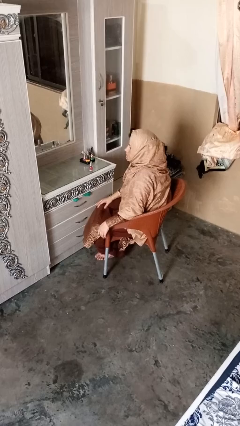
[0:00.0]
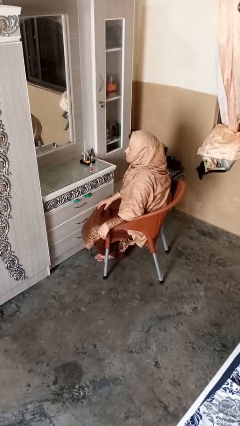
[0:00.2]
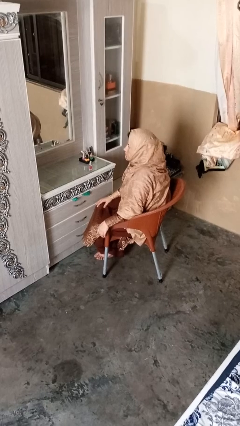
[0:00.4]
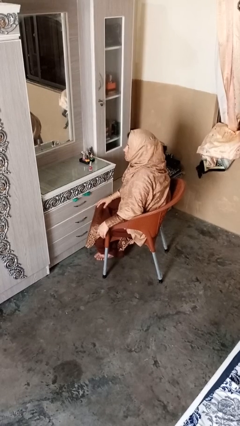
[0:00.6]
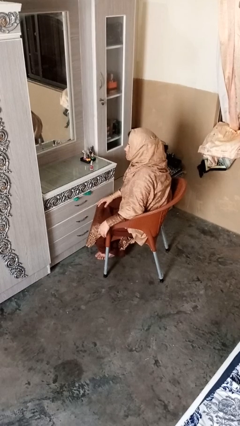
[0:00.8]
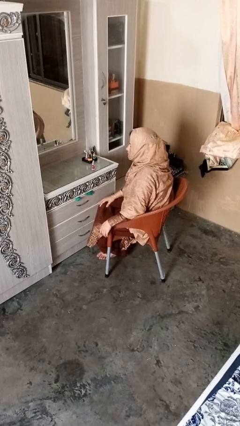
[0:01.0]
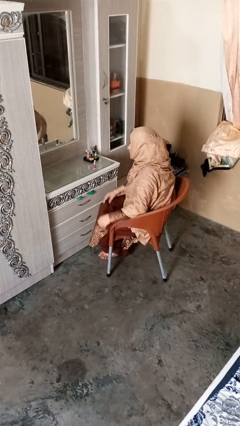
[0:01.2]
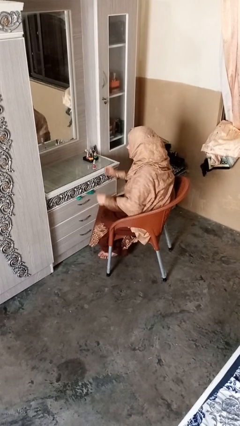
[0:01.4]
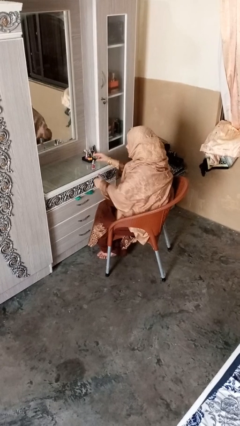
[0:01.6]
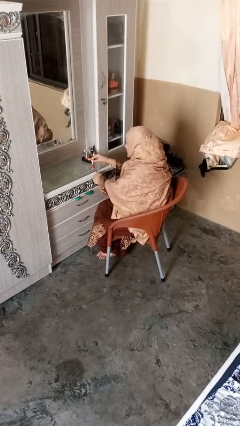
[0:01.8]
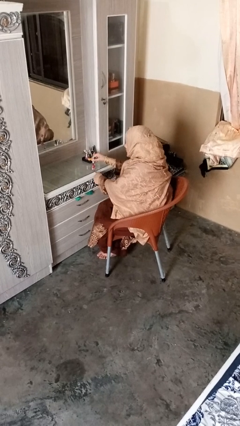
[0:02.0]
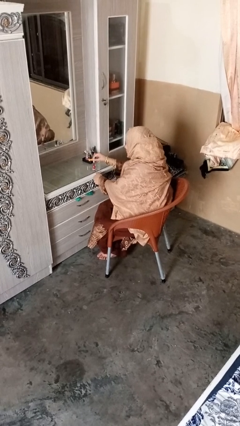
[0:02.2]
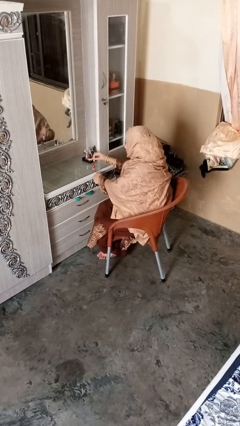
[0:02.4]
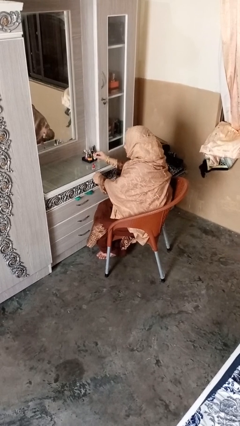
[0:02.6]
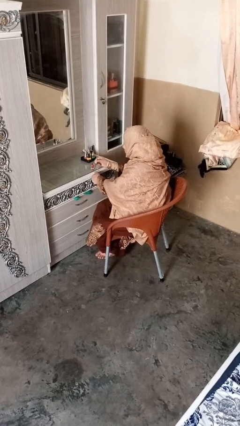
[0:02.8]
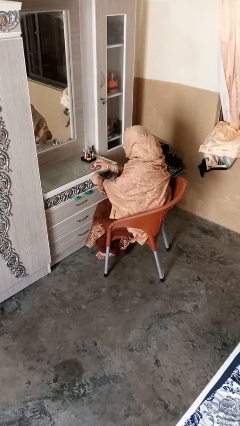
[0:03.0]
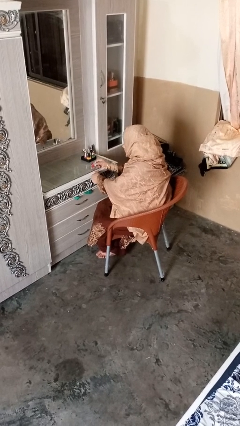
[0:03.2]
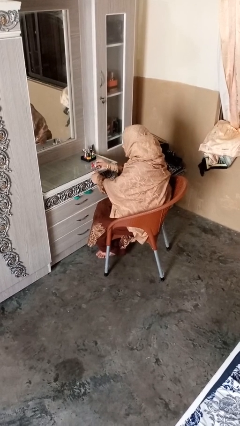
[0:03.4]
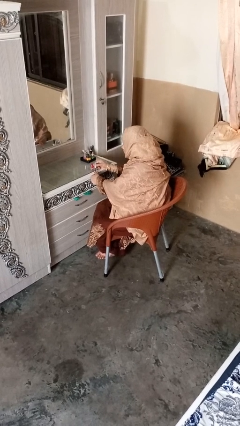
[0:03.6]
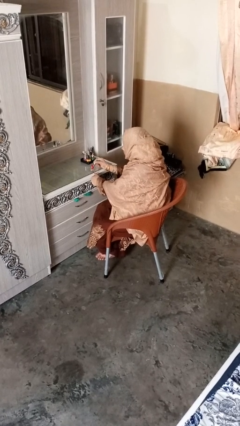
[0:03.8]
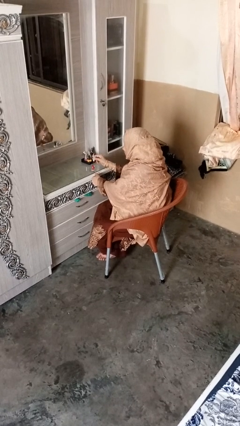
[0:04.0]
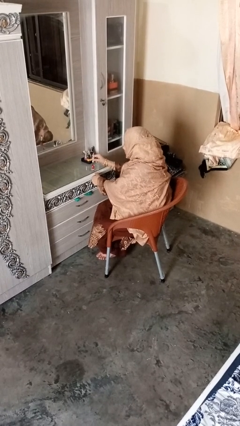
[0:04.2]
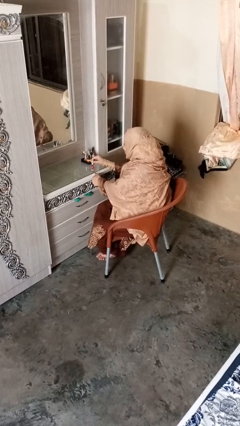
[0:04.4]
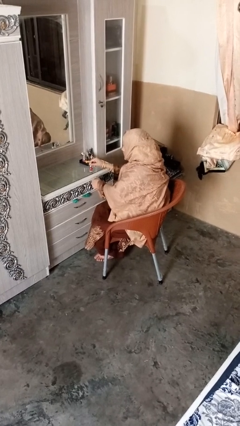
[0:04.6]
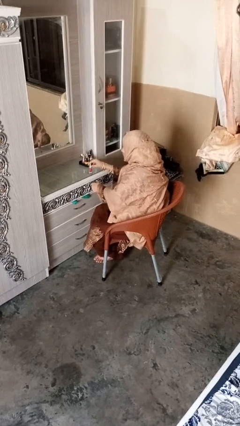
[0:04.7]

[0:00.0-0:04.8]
person paints fingernails

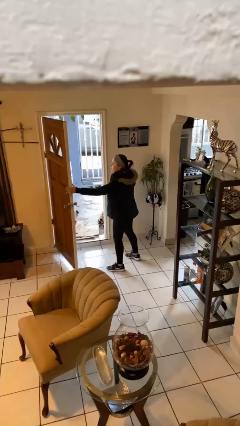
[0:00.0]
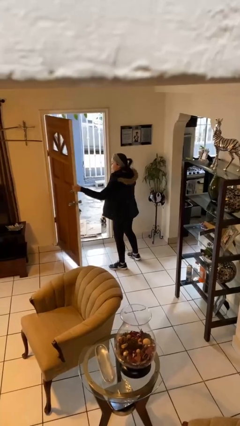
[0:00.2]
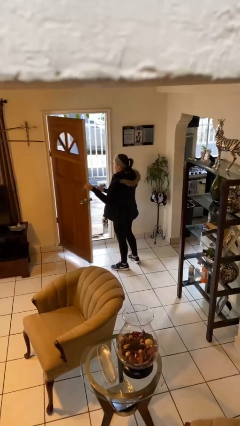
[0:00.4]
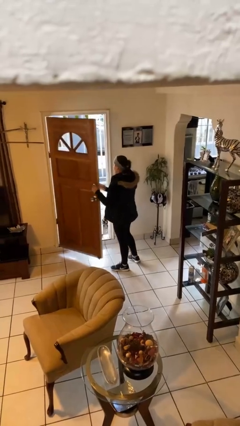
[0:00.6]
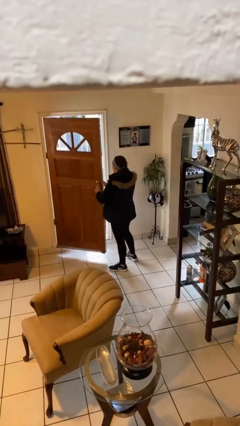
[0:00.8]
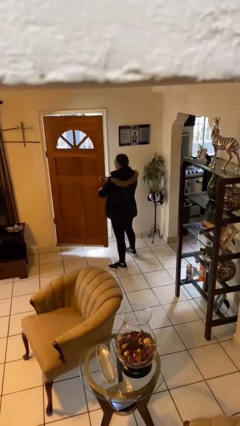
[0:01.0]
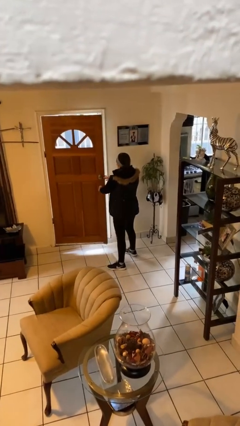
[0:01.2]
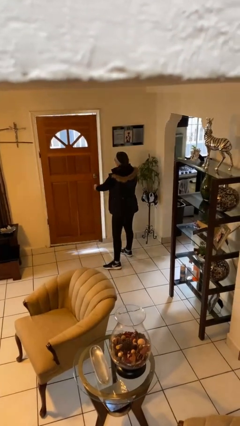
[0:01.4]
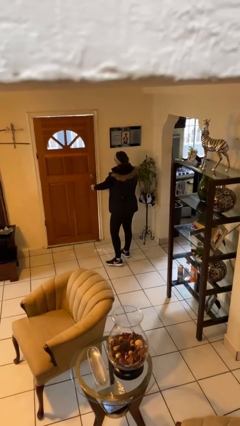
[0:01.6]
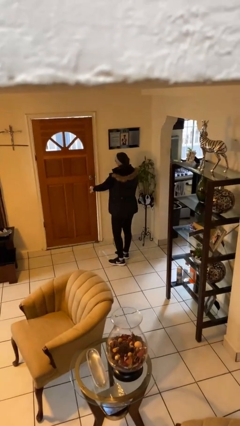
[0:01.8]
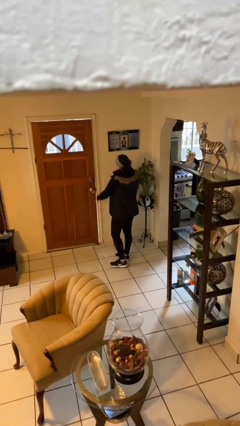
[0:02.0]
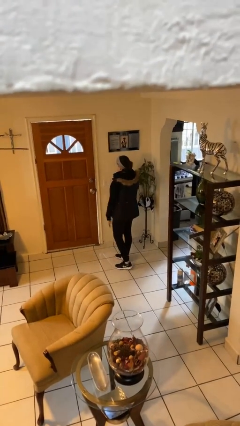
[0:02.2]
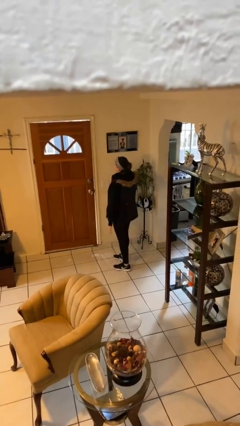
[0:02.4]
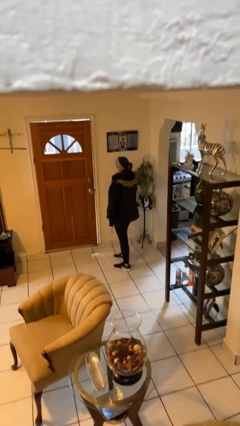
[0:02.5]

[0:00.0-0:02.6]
person closes facility door

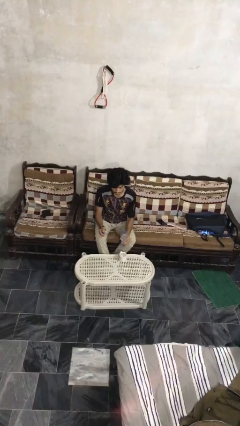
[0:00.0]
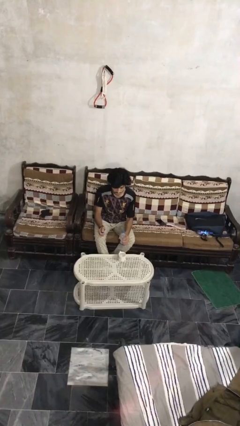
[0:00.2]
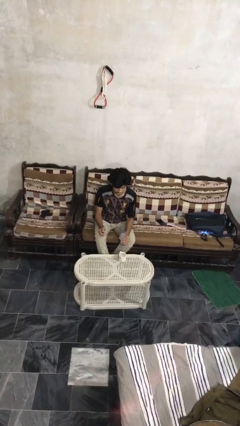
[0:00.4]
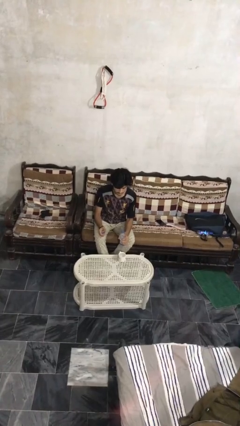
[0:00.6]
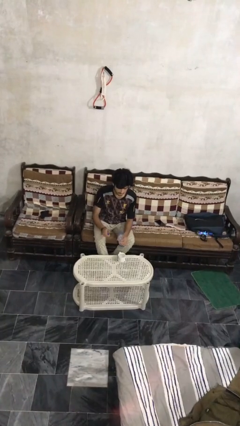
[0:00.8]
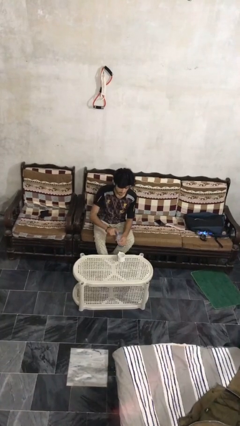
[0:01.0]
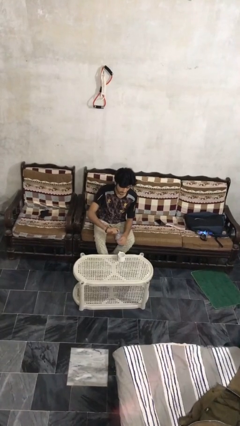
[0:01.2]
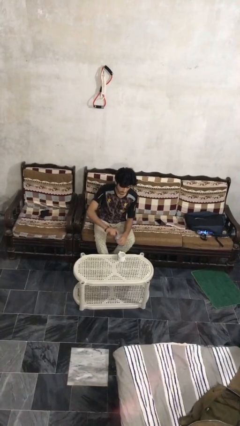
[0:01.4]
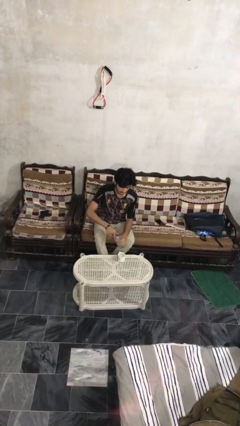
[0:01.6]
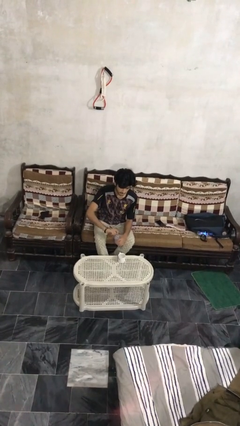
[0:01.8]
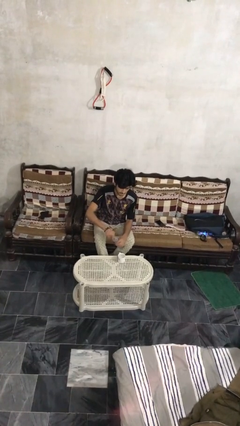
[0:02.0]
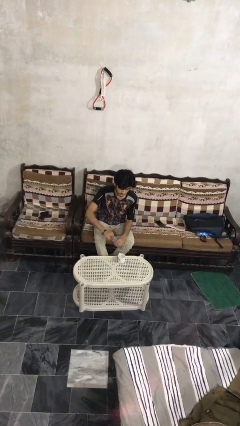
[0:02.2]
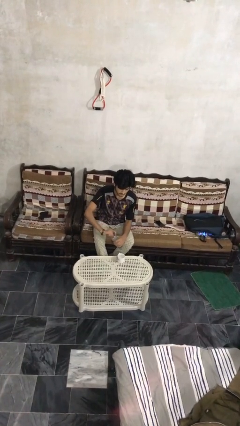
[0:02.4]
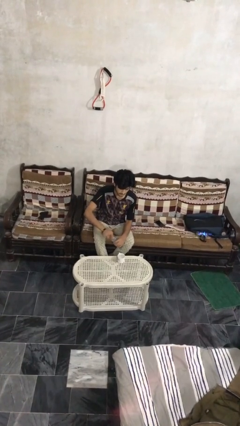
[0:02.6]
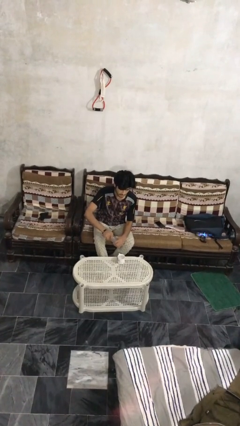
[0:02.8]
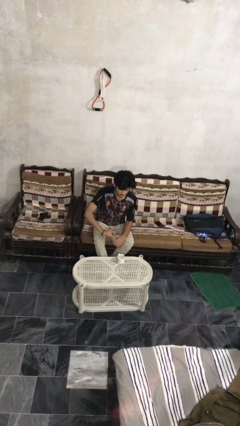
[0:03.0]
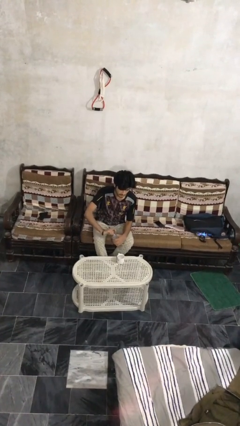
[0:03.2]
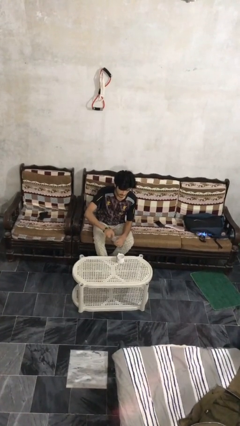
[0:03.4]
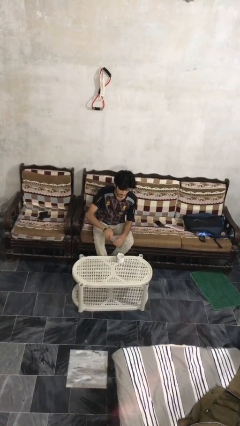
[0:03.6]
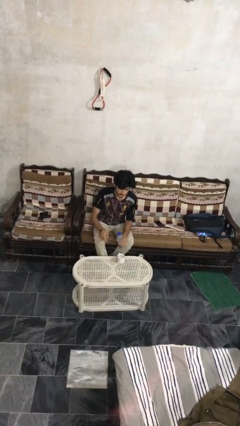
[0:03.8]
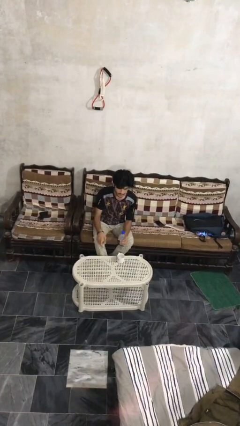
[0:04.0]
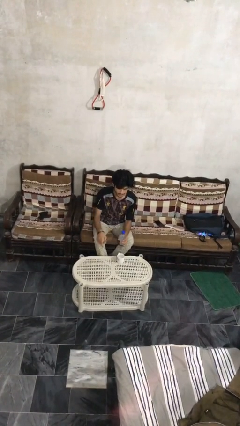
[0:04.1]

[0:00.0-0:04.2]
person screws lid to bottle

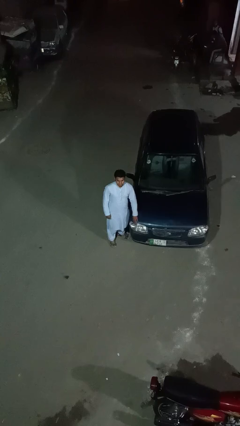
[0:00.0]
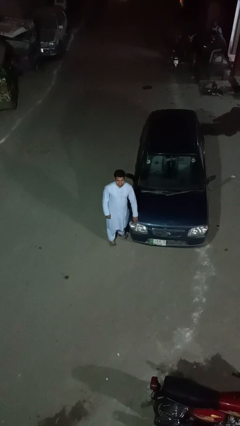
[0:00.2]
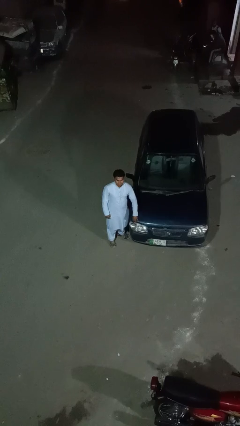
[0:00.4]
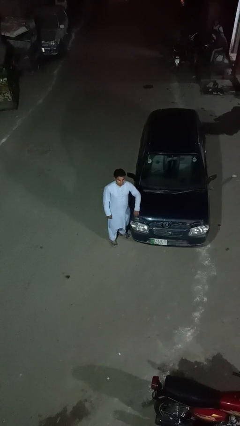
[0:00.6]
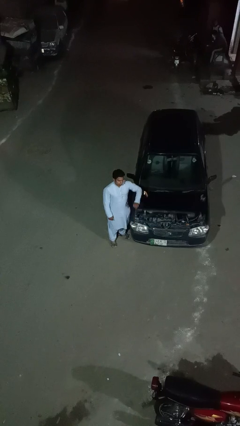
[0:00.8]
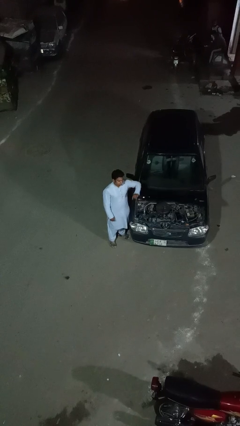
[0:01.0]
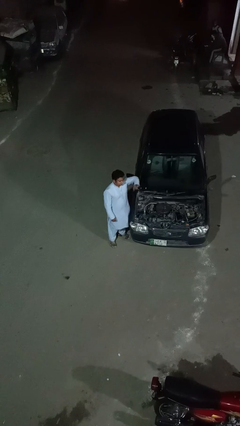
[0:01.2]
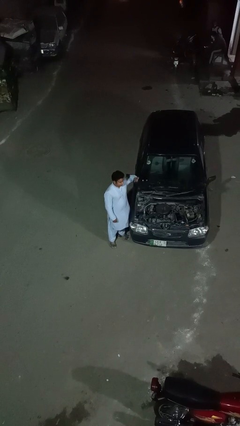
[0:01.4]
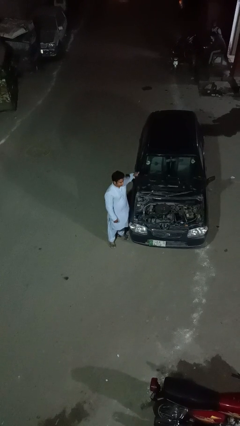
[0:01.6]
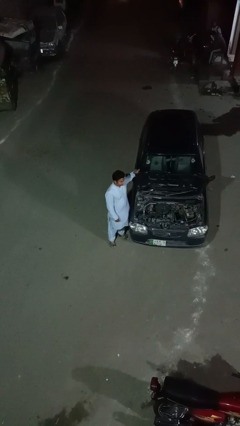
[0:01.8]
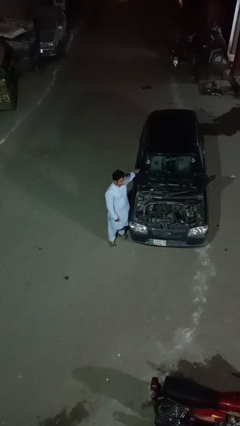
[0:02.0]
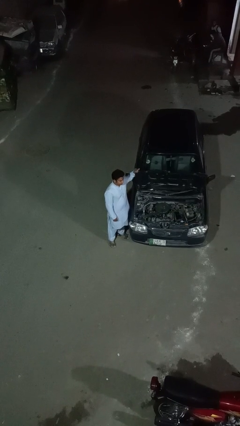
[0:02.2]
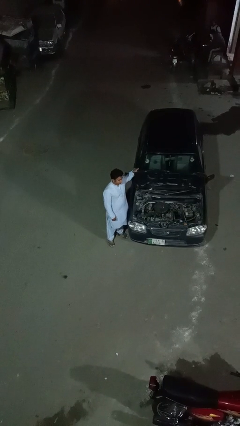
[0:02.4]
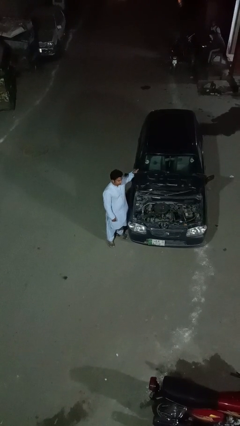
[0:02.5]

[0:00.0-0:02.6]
person opens car hood

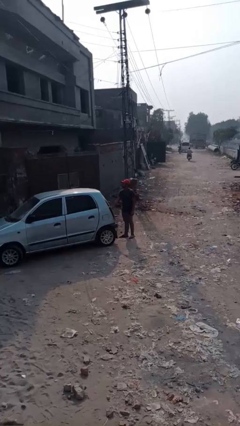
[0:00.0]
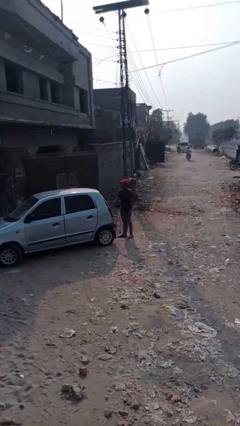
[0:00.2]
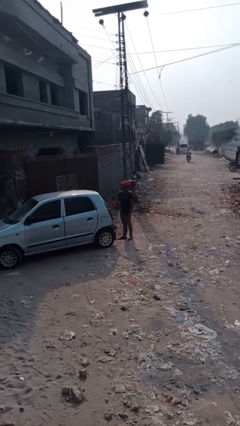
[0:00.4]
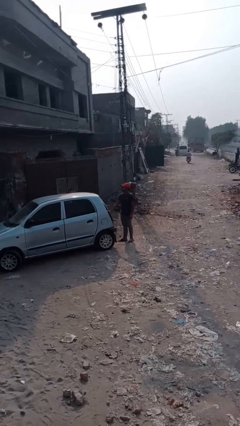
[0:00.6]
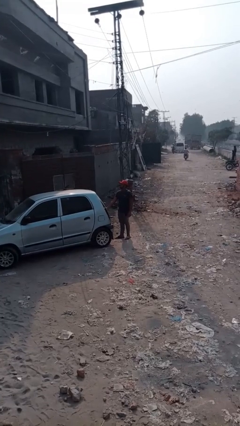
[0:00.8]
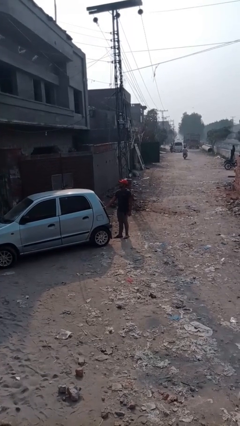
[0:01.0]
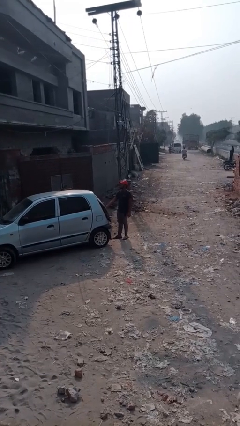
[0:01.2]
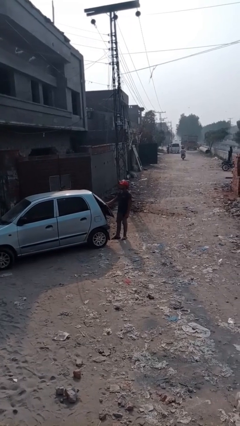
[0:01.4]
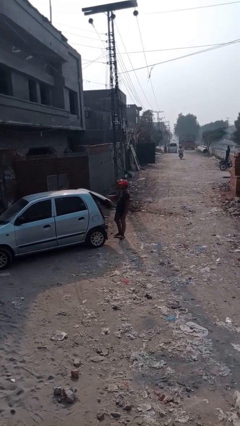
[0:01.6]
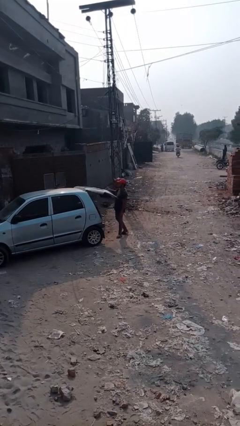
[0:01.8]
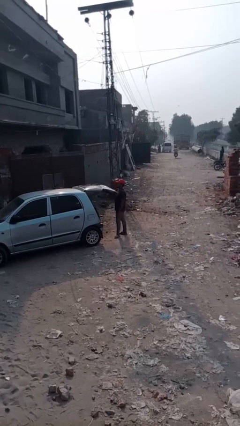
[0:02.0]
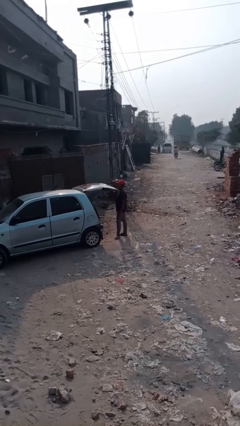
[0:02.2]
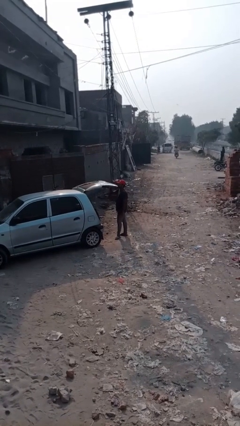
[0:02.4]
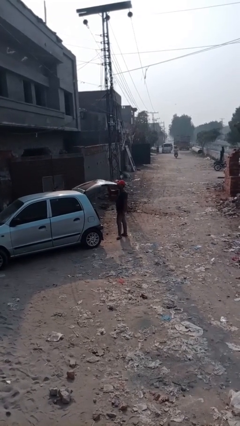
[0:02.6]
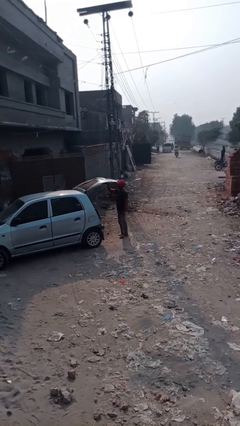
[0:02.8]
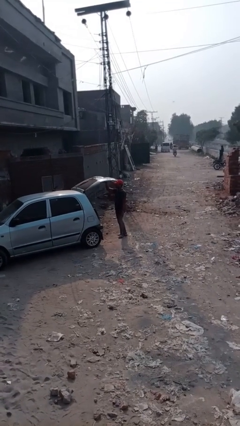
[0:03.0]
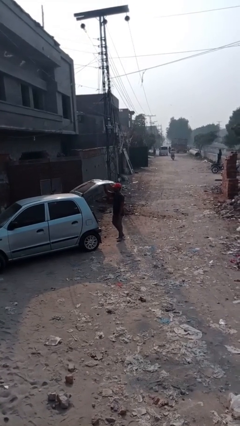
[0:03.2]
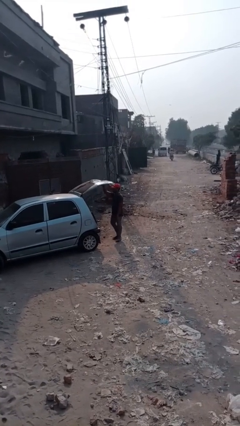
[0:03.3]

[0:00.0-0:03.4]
person opens car trunk
